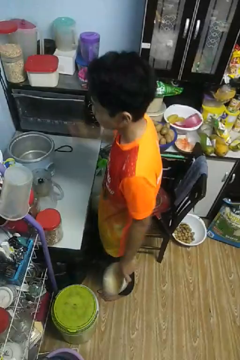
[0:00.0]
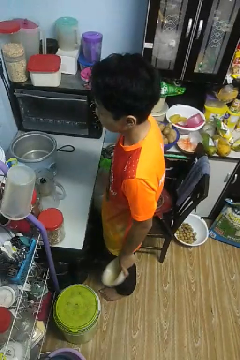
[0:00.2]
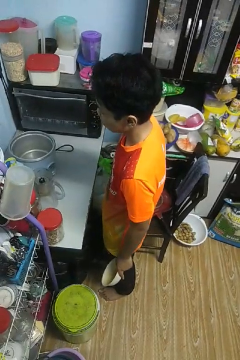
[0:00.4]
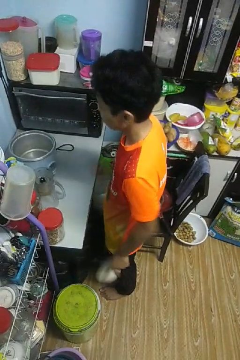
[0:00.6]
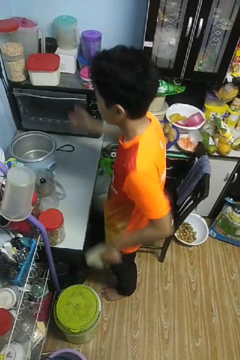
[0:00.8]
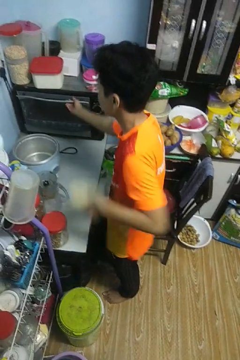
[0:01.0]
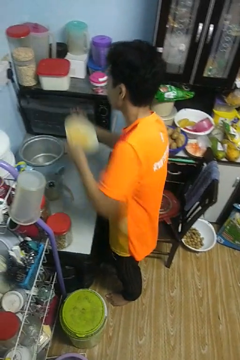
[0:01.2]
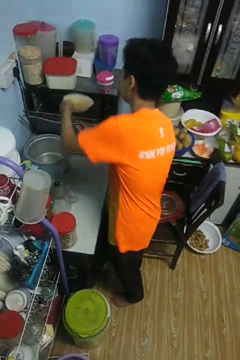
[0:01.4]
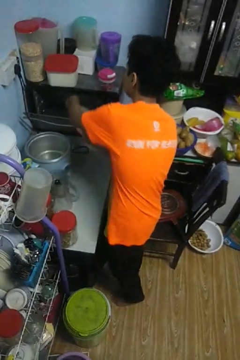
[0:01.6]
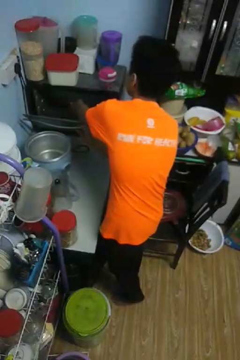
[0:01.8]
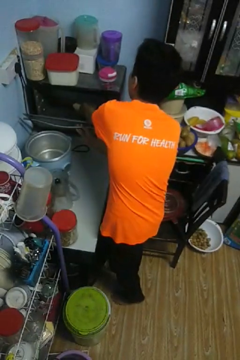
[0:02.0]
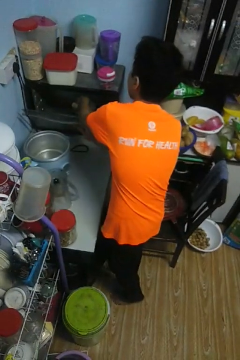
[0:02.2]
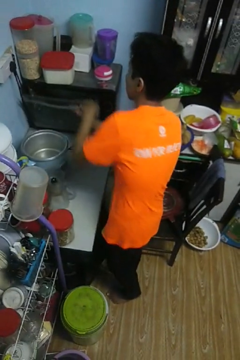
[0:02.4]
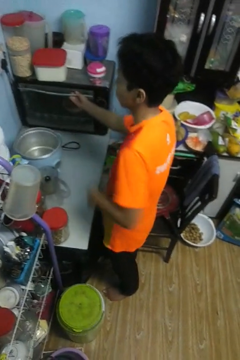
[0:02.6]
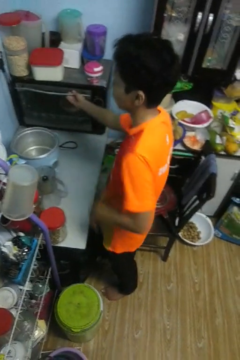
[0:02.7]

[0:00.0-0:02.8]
person puts object into oven

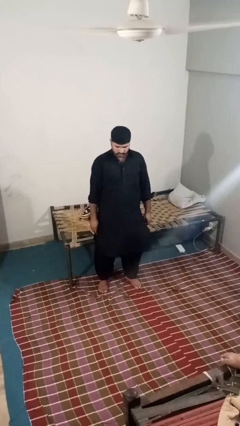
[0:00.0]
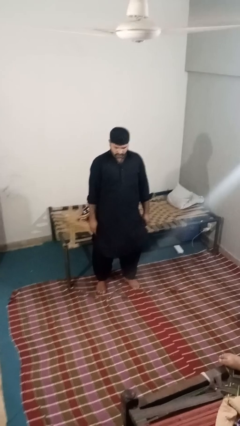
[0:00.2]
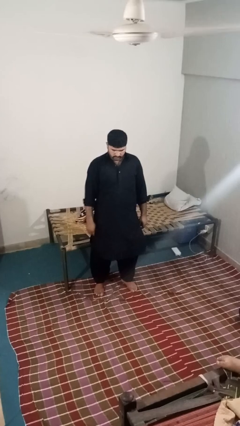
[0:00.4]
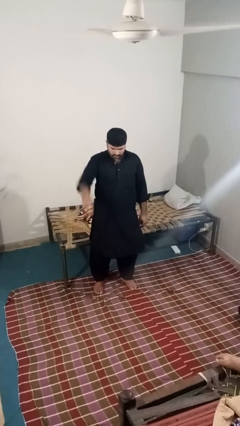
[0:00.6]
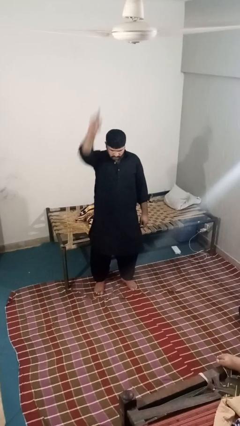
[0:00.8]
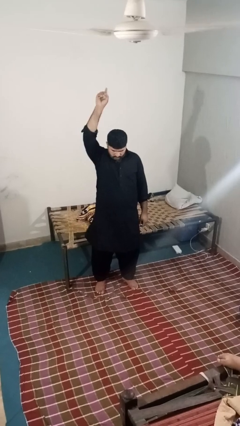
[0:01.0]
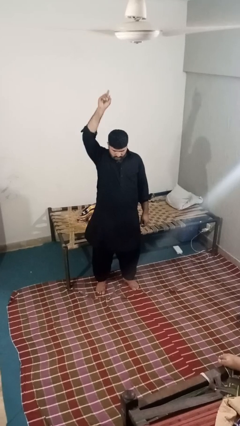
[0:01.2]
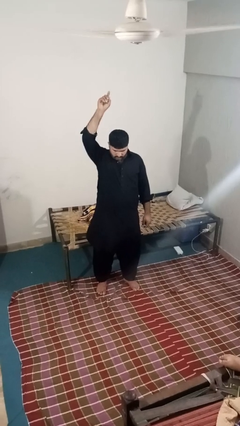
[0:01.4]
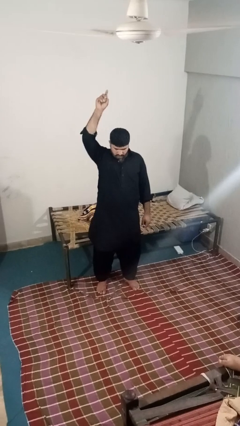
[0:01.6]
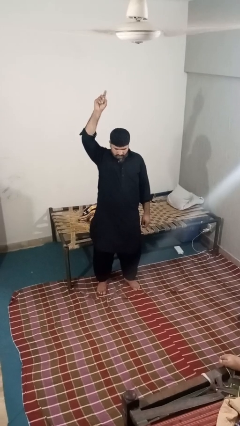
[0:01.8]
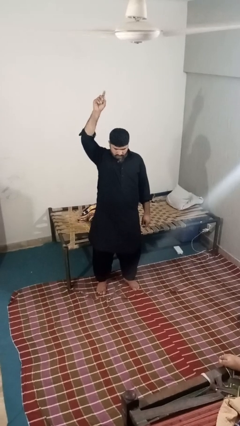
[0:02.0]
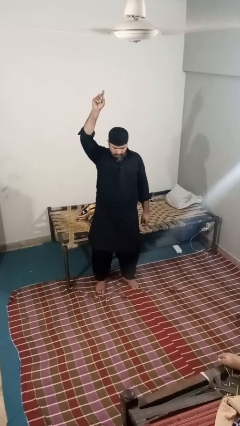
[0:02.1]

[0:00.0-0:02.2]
person gestures swipe up

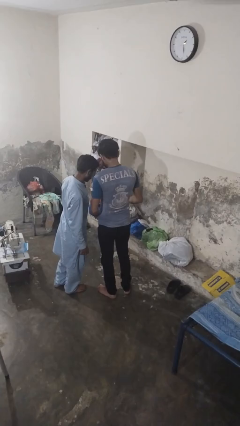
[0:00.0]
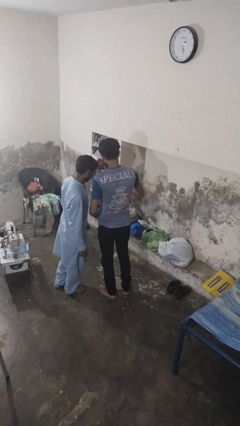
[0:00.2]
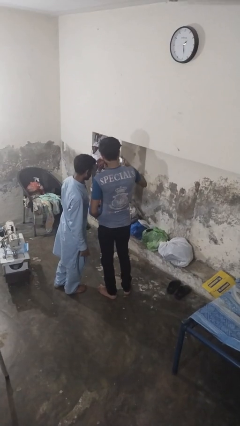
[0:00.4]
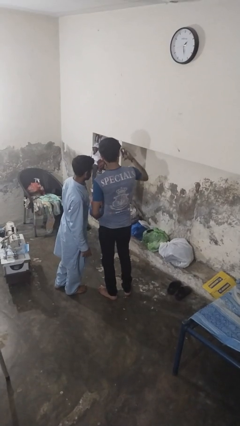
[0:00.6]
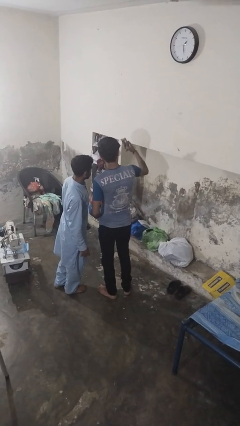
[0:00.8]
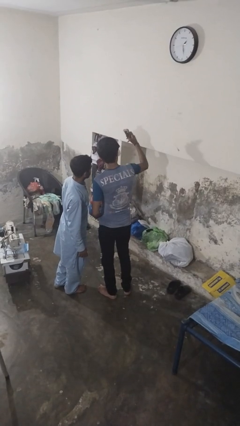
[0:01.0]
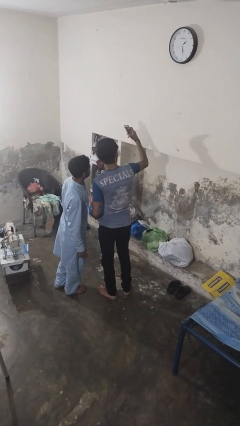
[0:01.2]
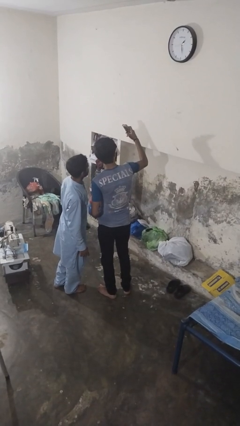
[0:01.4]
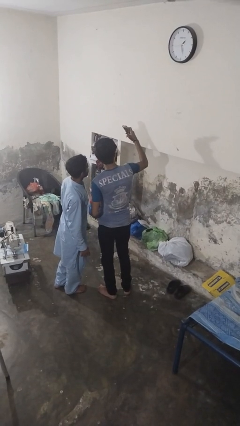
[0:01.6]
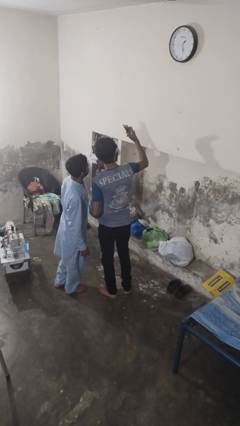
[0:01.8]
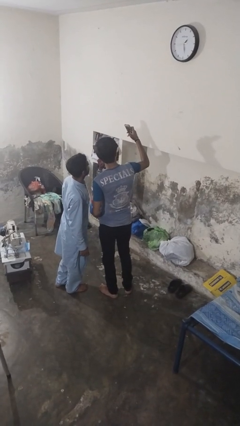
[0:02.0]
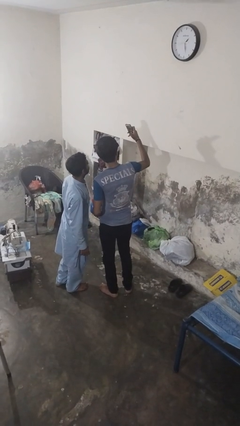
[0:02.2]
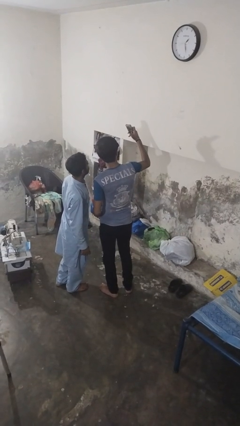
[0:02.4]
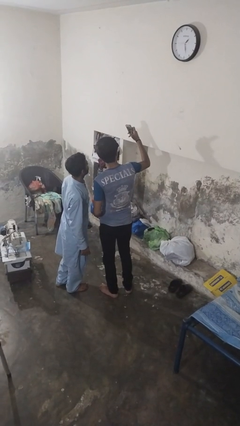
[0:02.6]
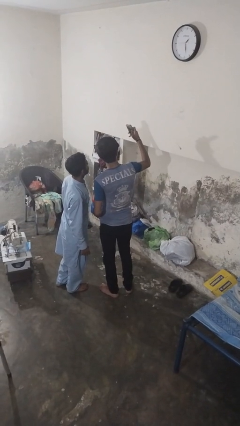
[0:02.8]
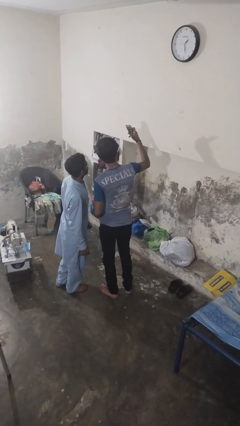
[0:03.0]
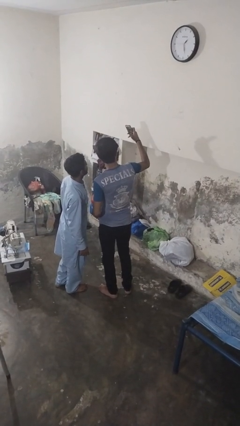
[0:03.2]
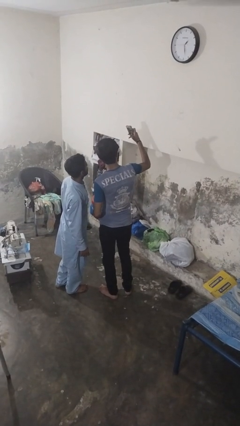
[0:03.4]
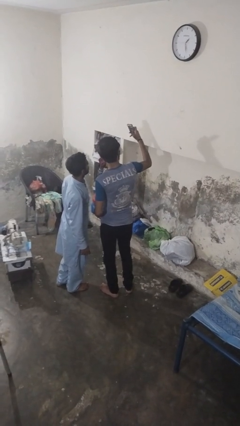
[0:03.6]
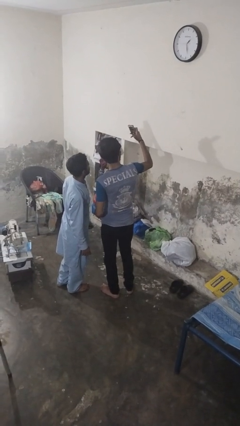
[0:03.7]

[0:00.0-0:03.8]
person takes selfie with person

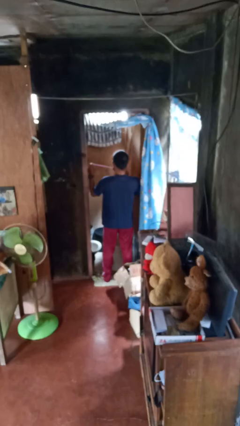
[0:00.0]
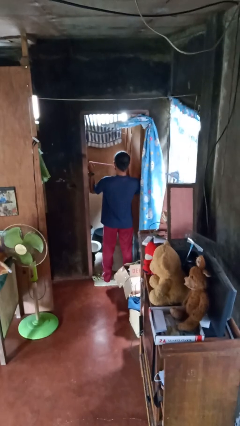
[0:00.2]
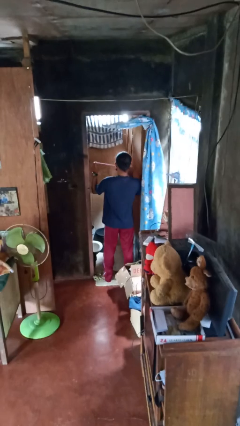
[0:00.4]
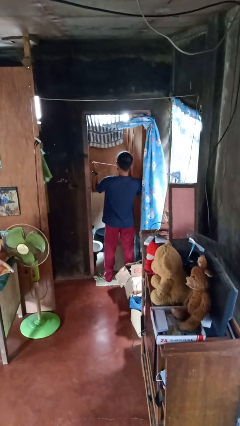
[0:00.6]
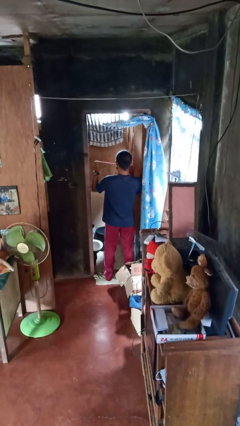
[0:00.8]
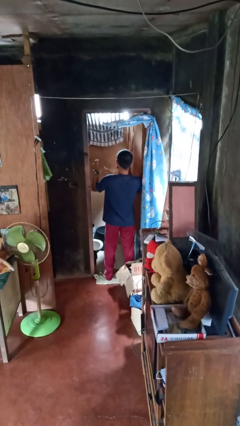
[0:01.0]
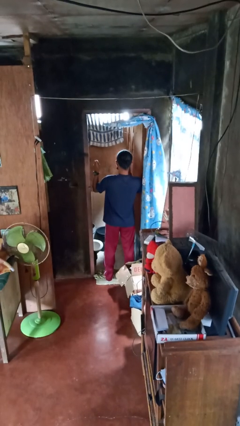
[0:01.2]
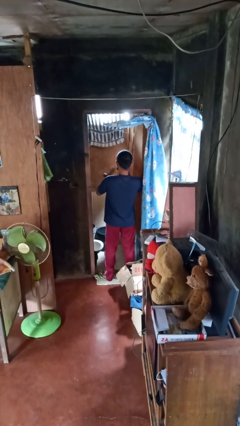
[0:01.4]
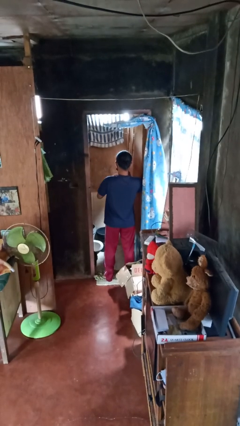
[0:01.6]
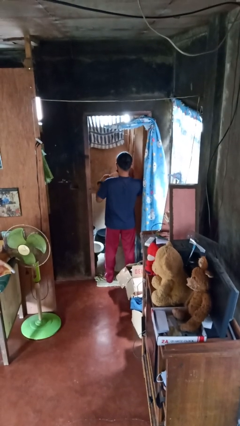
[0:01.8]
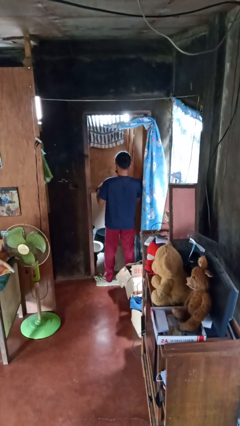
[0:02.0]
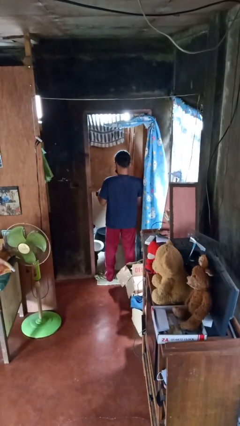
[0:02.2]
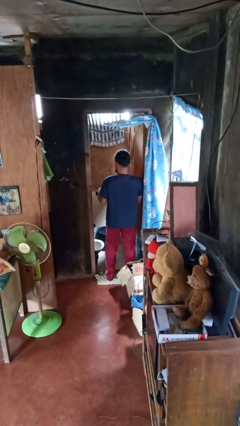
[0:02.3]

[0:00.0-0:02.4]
person flosses

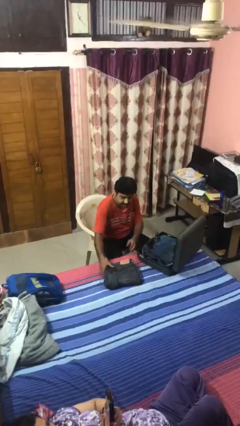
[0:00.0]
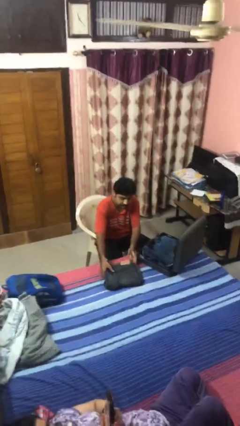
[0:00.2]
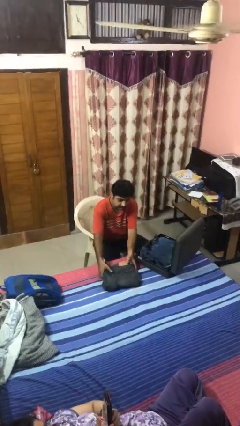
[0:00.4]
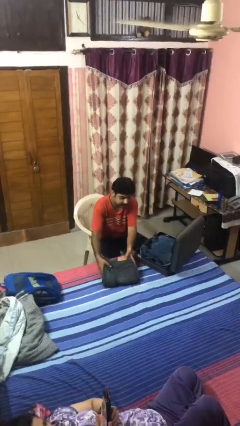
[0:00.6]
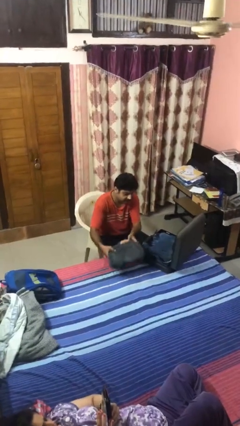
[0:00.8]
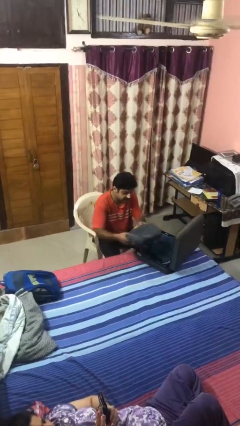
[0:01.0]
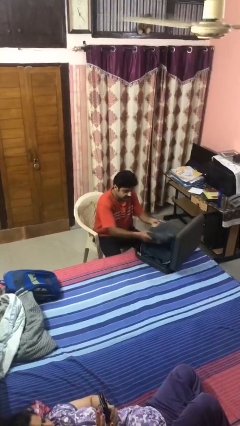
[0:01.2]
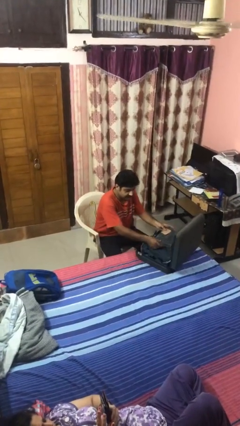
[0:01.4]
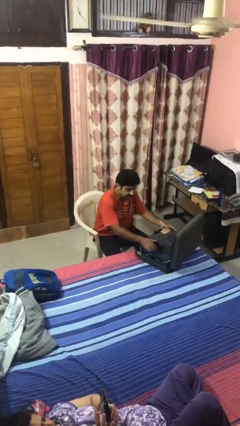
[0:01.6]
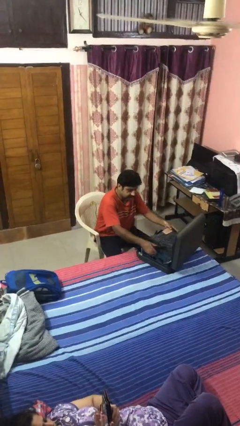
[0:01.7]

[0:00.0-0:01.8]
person loads clothes into suitcase

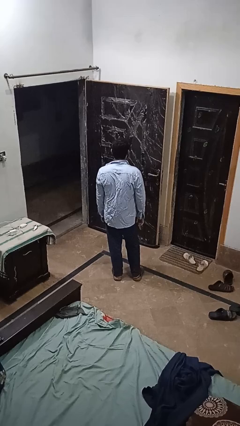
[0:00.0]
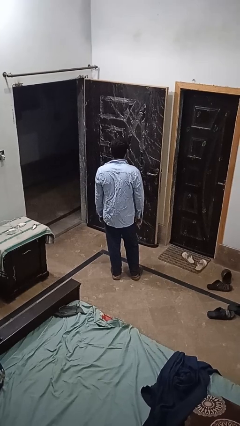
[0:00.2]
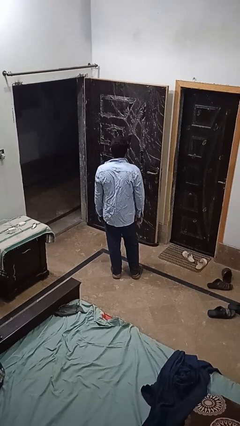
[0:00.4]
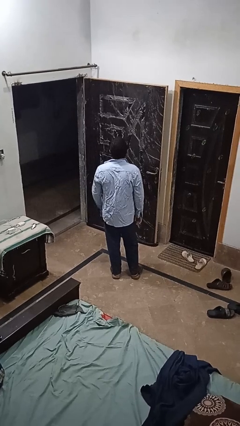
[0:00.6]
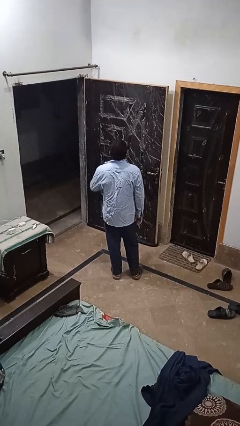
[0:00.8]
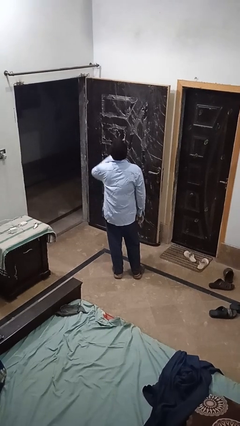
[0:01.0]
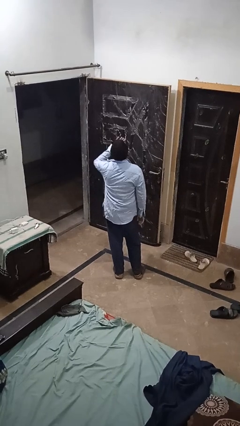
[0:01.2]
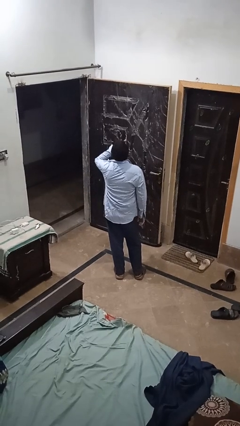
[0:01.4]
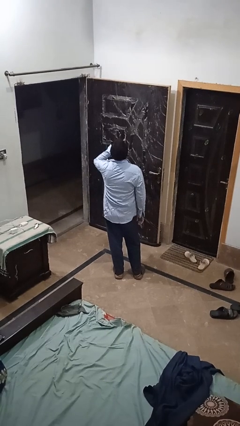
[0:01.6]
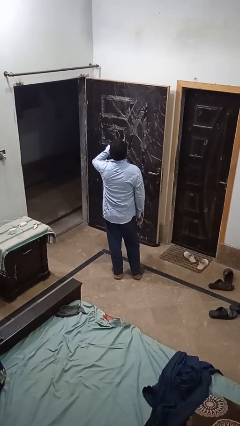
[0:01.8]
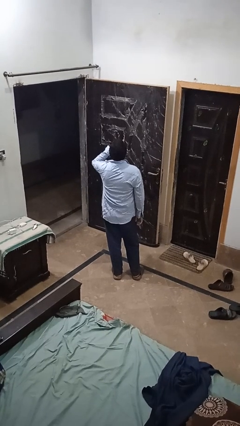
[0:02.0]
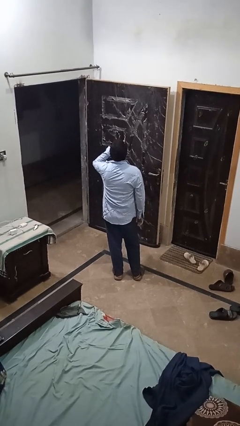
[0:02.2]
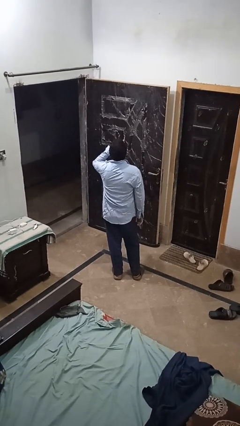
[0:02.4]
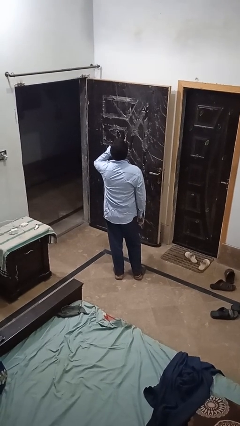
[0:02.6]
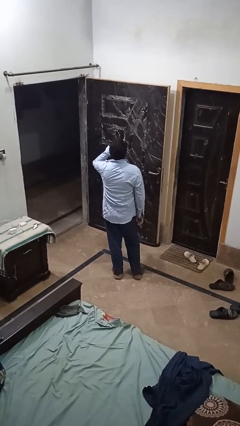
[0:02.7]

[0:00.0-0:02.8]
person yawns

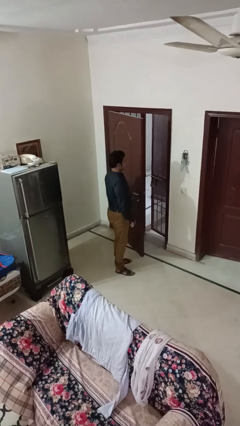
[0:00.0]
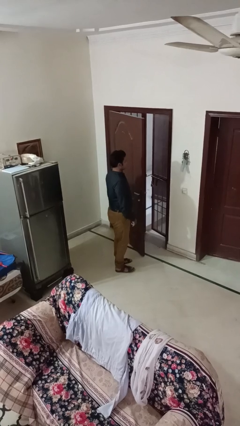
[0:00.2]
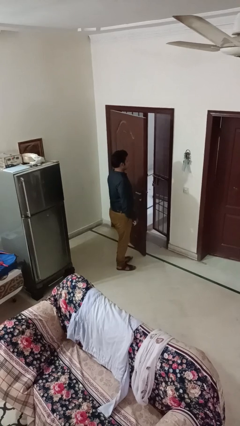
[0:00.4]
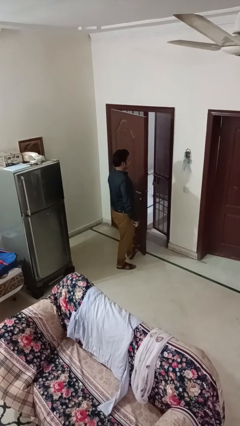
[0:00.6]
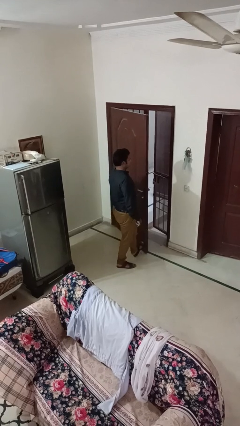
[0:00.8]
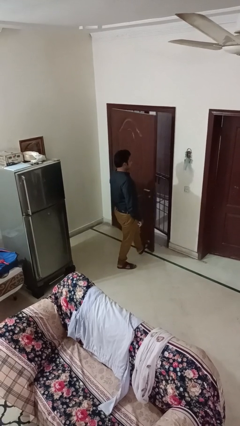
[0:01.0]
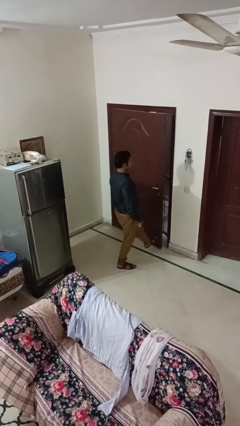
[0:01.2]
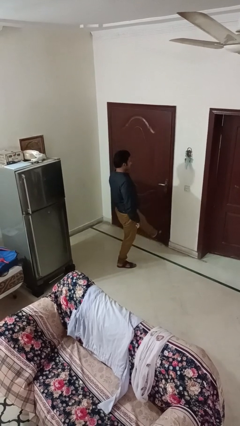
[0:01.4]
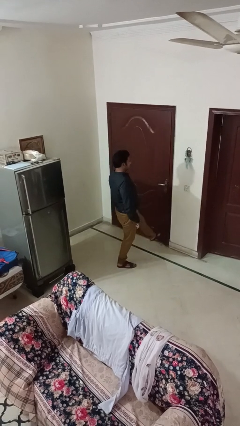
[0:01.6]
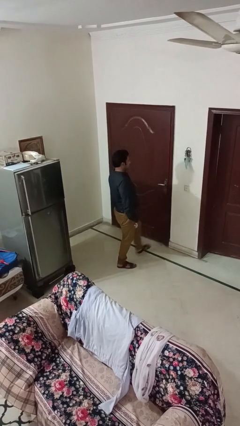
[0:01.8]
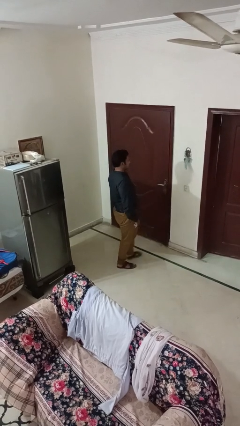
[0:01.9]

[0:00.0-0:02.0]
person closes door with foot
